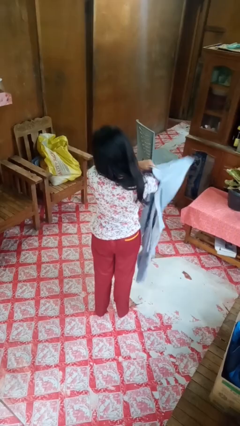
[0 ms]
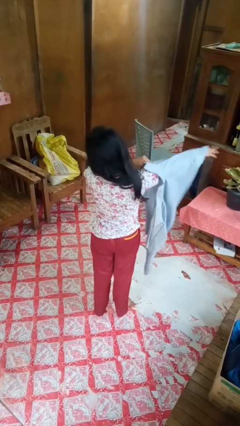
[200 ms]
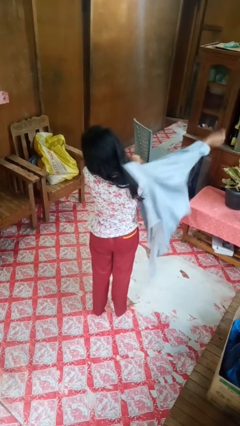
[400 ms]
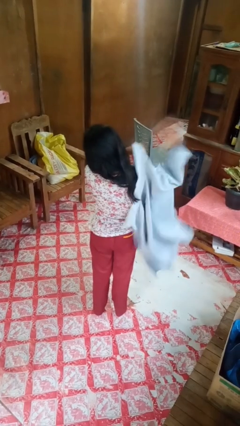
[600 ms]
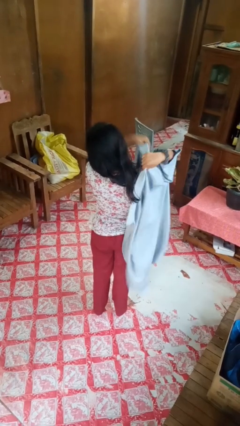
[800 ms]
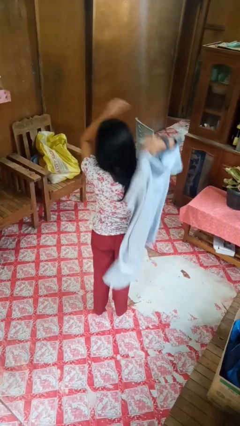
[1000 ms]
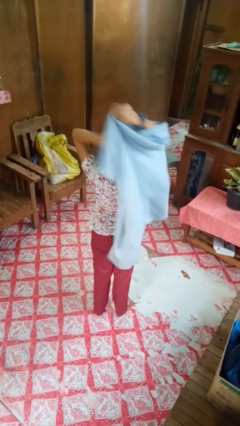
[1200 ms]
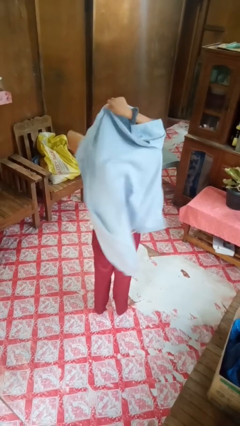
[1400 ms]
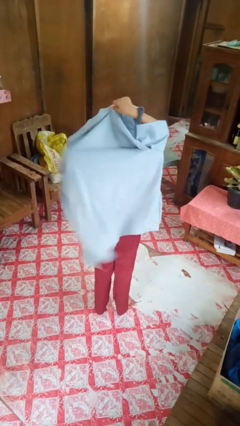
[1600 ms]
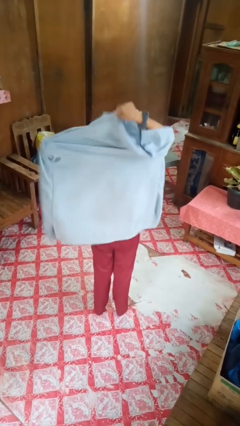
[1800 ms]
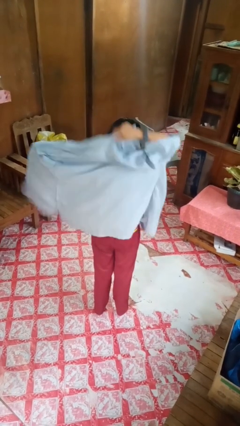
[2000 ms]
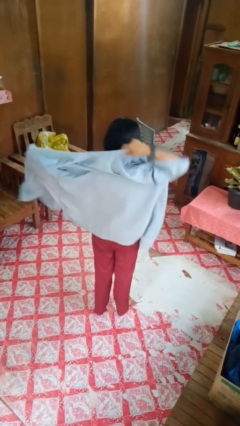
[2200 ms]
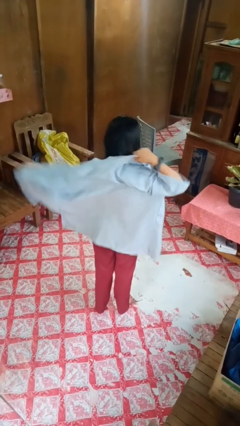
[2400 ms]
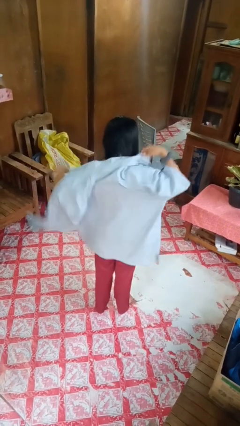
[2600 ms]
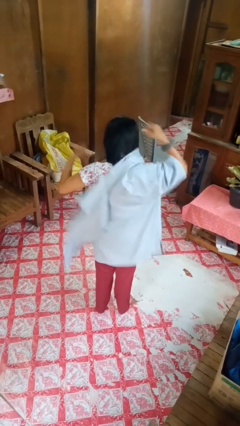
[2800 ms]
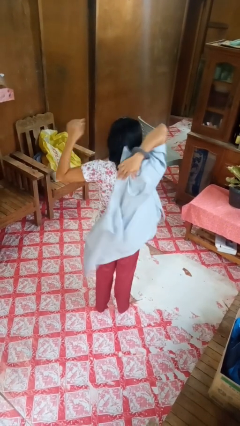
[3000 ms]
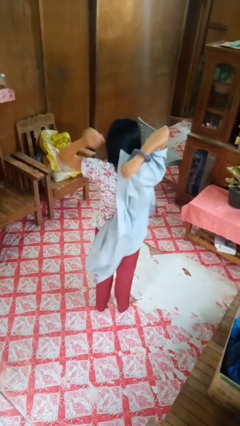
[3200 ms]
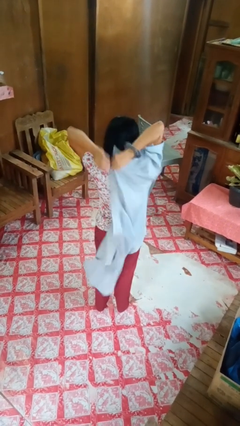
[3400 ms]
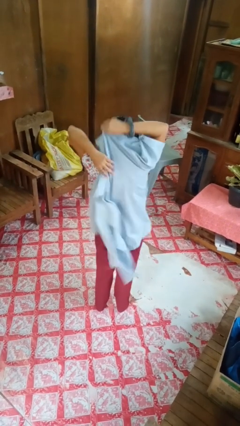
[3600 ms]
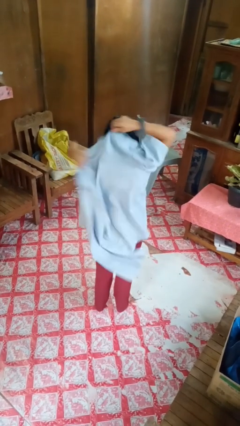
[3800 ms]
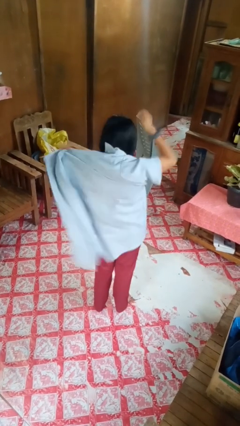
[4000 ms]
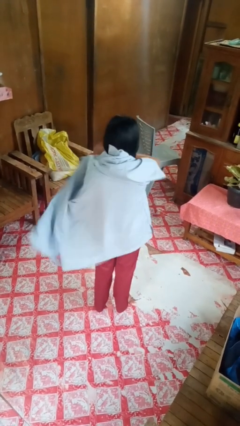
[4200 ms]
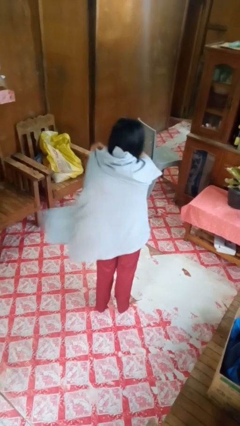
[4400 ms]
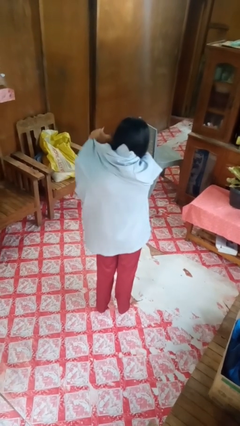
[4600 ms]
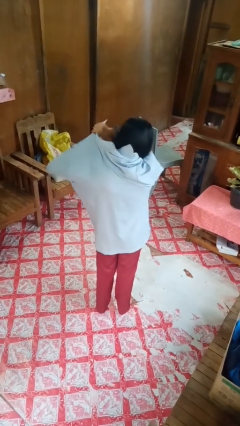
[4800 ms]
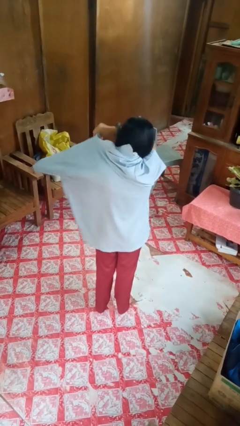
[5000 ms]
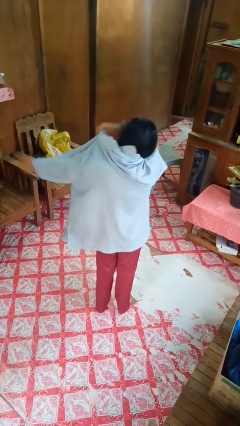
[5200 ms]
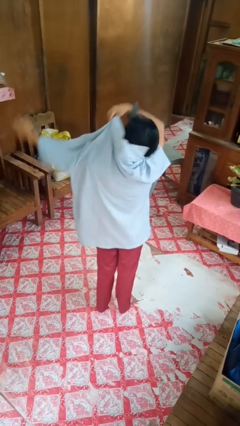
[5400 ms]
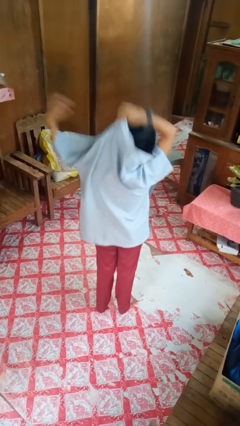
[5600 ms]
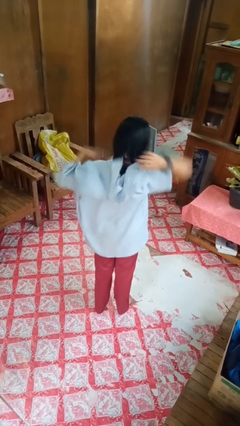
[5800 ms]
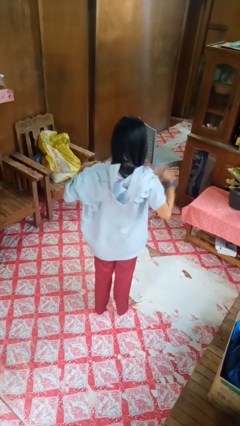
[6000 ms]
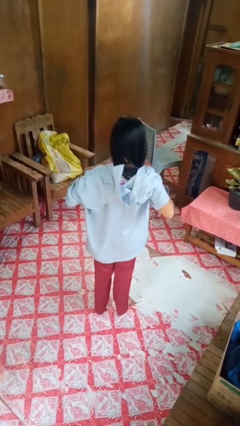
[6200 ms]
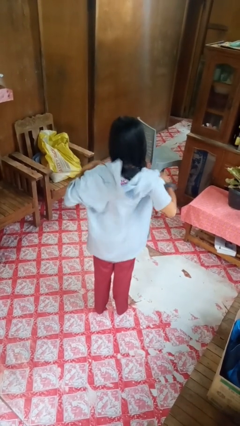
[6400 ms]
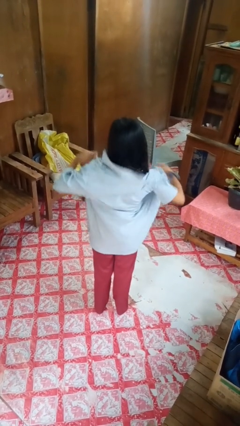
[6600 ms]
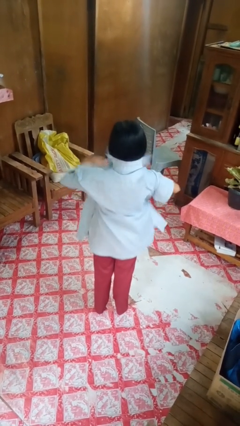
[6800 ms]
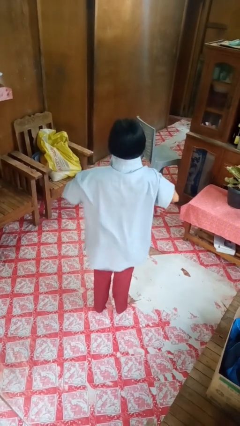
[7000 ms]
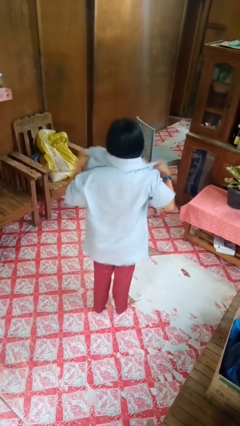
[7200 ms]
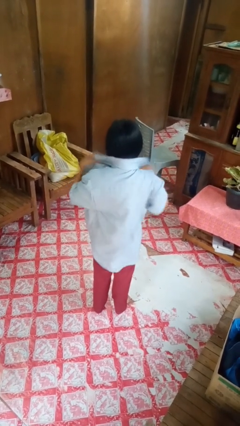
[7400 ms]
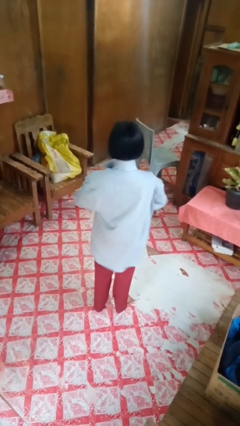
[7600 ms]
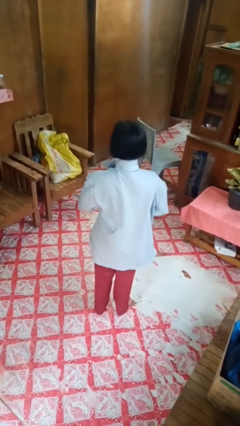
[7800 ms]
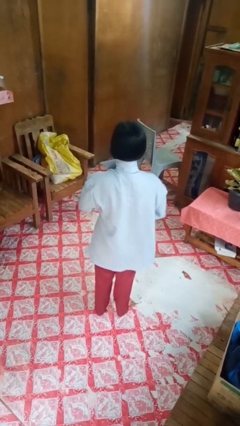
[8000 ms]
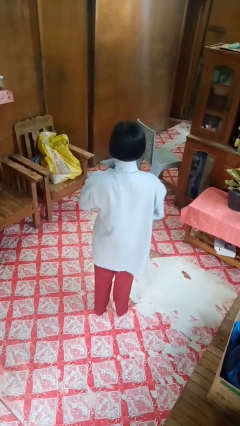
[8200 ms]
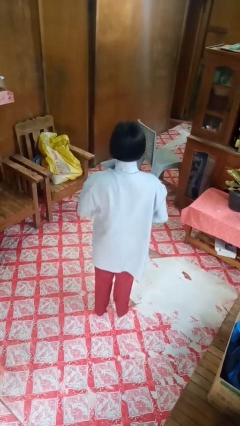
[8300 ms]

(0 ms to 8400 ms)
person puts on shirt

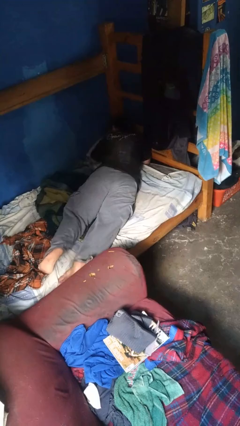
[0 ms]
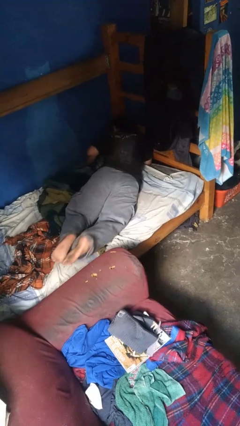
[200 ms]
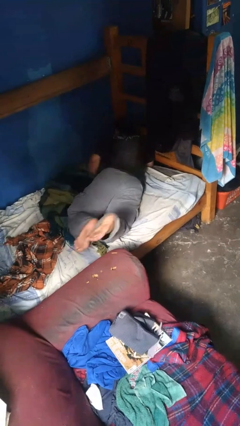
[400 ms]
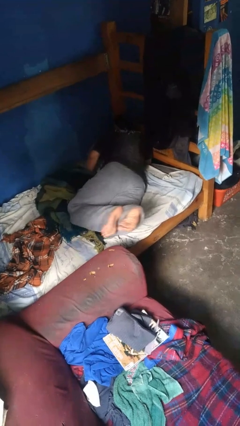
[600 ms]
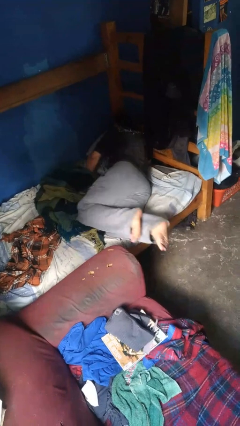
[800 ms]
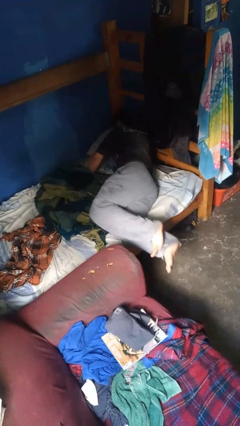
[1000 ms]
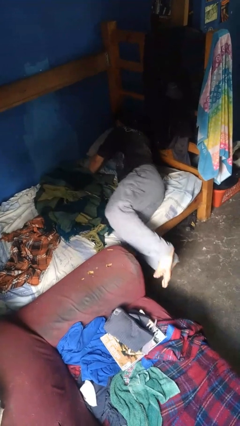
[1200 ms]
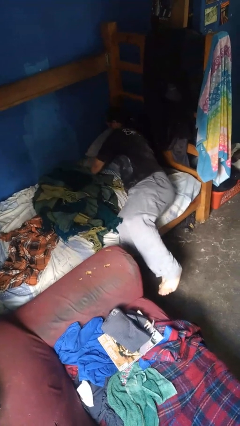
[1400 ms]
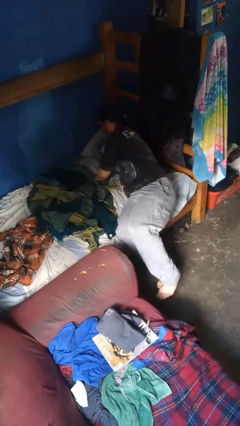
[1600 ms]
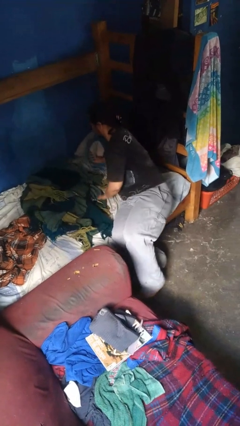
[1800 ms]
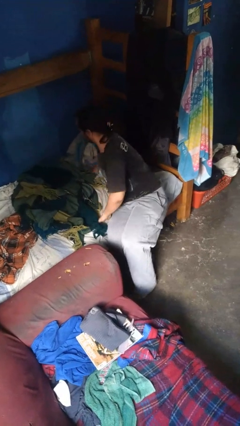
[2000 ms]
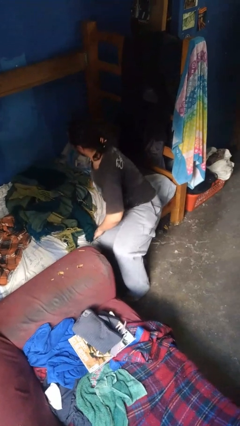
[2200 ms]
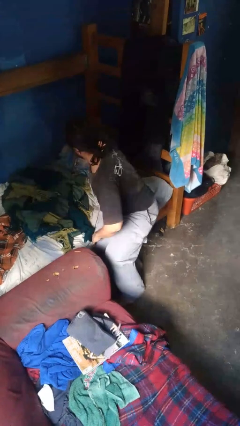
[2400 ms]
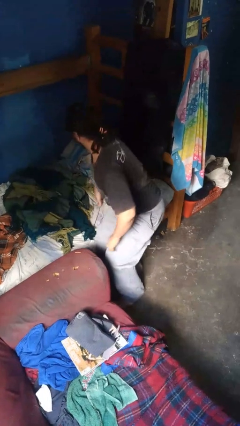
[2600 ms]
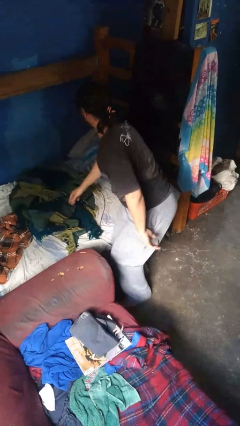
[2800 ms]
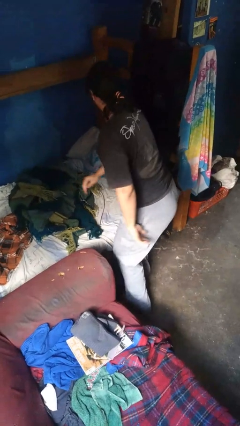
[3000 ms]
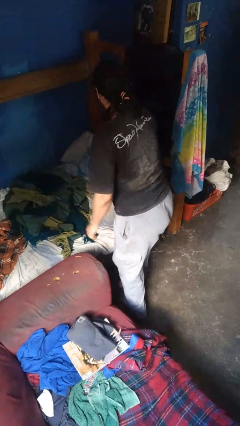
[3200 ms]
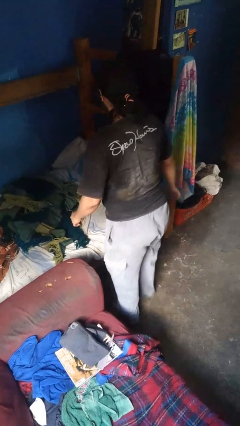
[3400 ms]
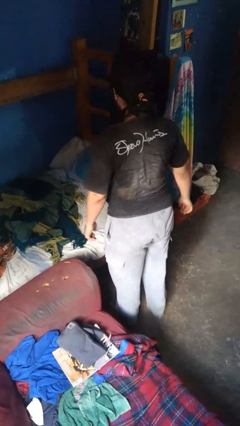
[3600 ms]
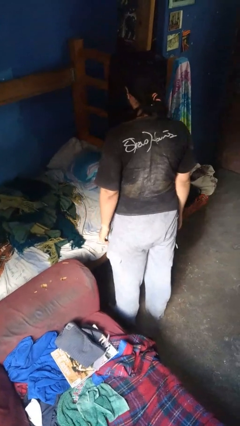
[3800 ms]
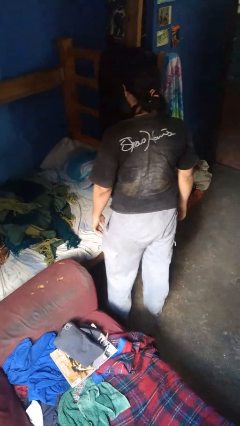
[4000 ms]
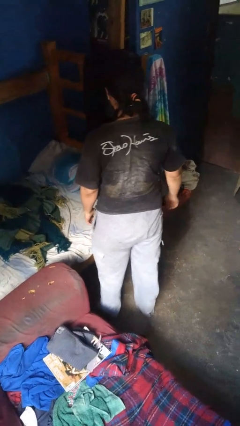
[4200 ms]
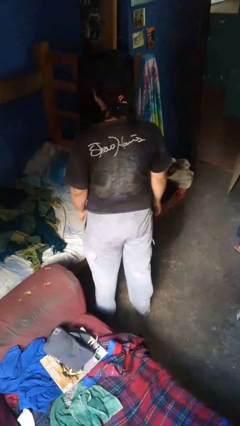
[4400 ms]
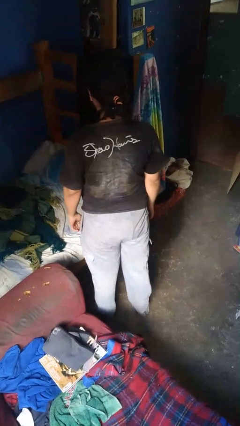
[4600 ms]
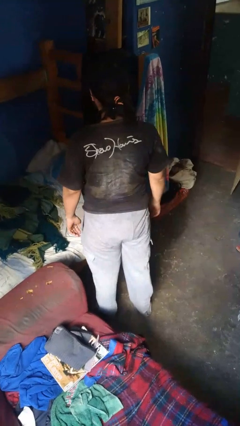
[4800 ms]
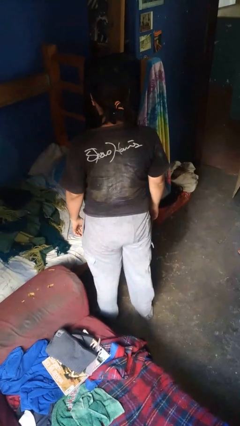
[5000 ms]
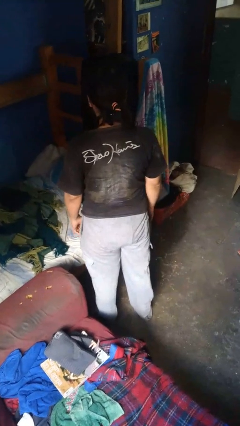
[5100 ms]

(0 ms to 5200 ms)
person stands up

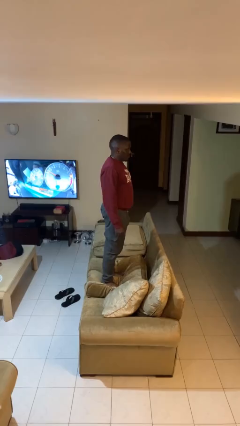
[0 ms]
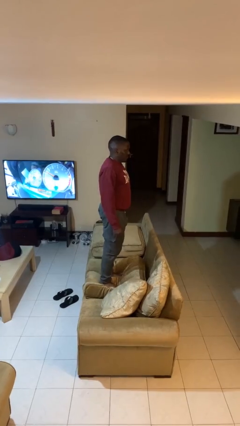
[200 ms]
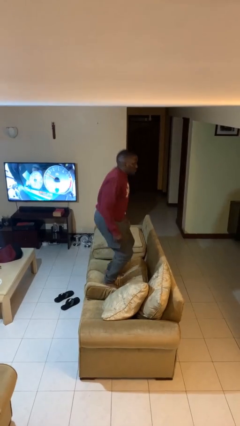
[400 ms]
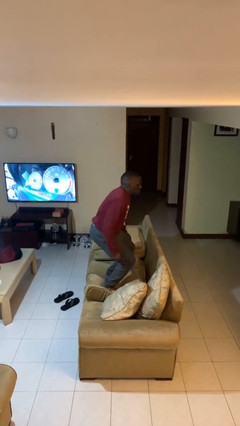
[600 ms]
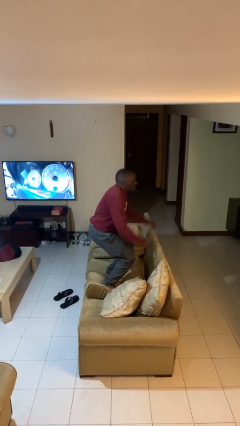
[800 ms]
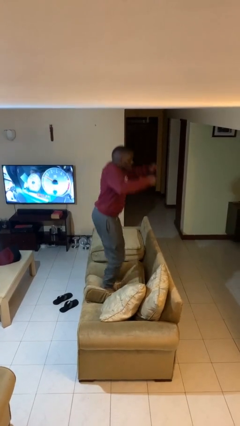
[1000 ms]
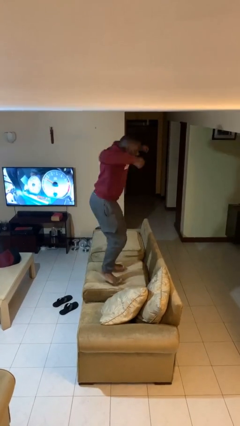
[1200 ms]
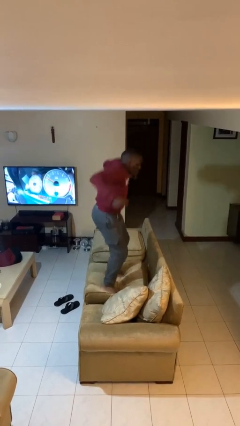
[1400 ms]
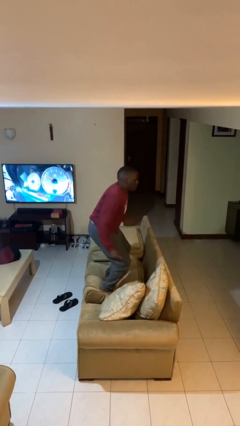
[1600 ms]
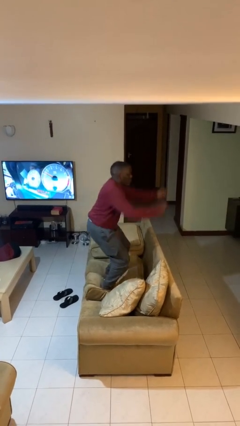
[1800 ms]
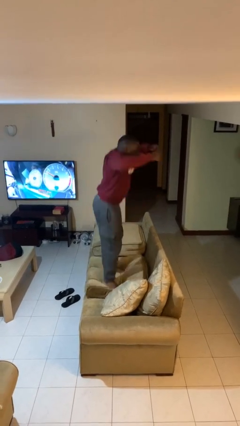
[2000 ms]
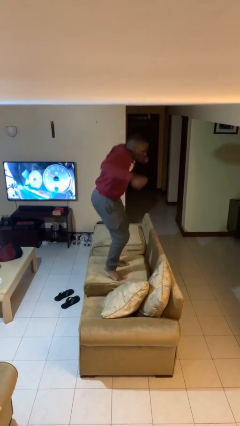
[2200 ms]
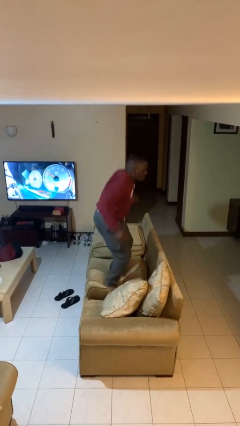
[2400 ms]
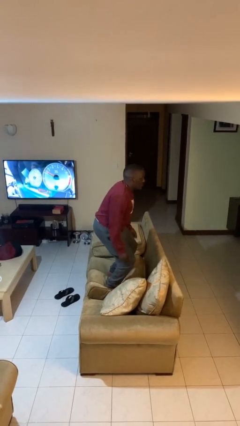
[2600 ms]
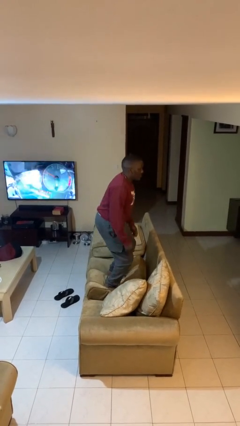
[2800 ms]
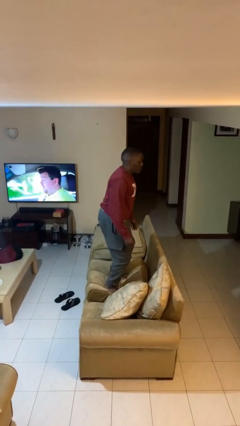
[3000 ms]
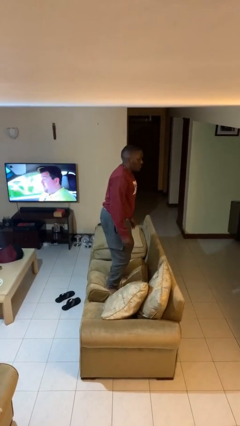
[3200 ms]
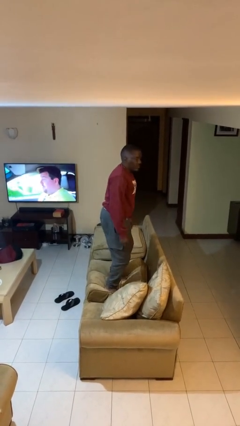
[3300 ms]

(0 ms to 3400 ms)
person jumps on couch

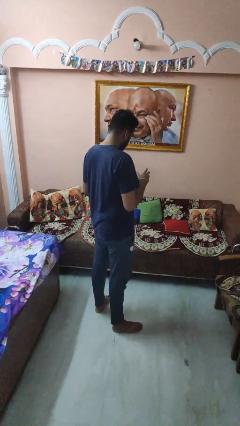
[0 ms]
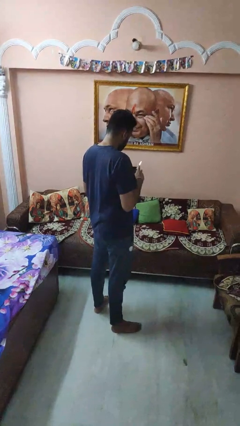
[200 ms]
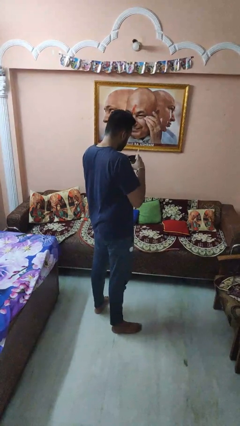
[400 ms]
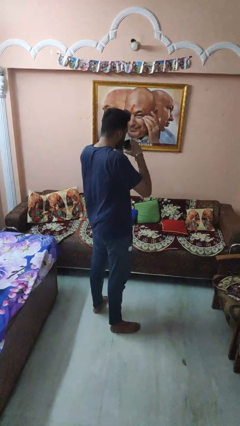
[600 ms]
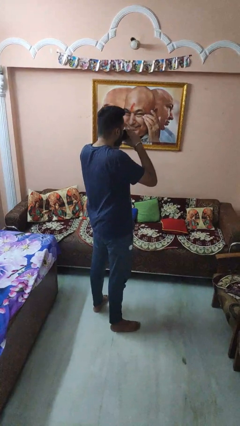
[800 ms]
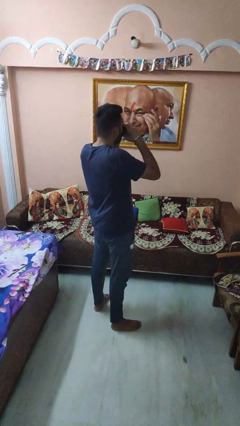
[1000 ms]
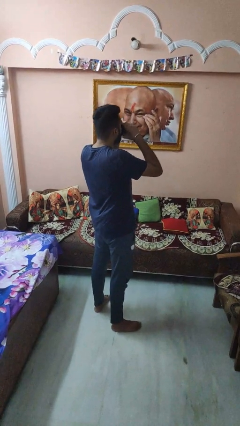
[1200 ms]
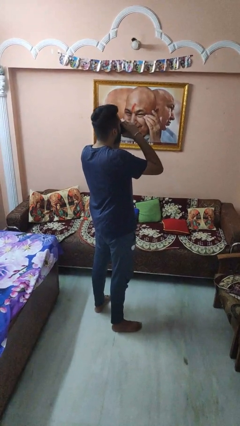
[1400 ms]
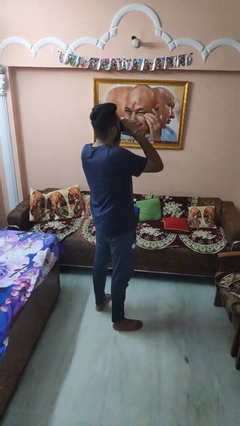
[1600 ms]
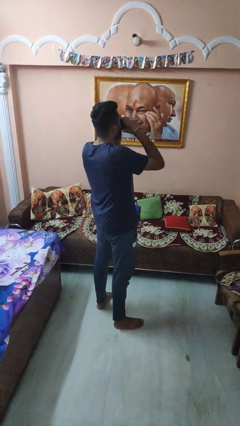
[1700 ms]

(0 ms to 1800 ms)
person drinks from mug
